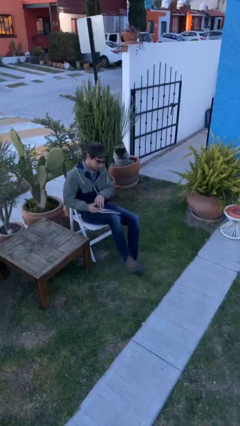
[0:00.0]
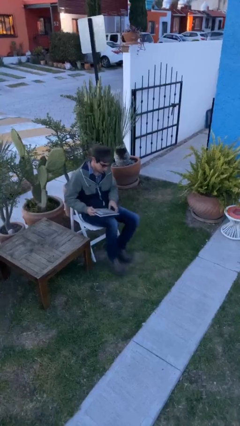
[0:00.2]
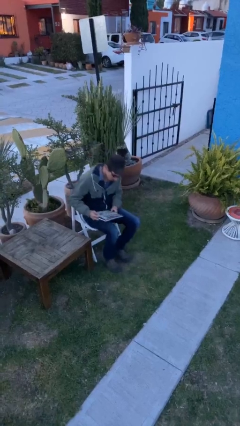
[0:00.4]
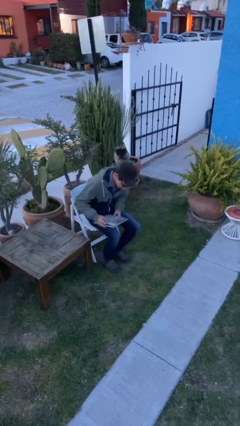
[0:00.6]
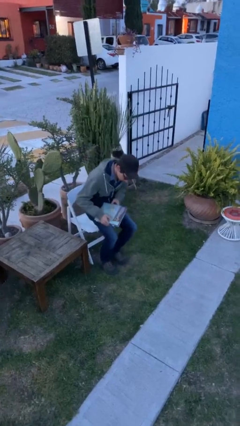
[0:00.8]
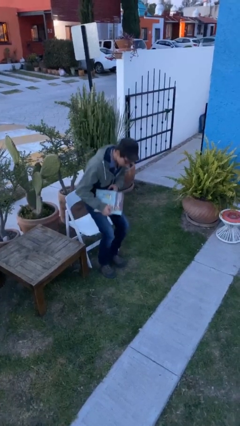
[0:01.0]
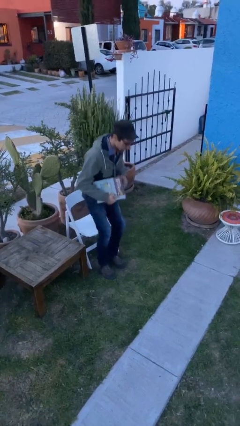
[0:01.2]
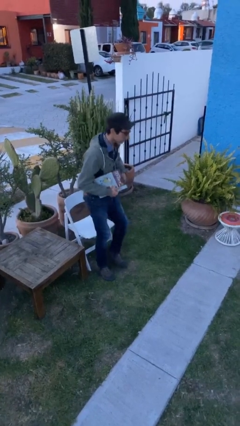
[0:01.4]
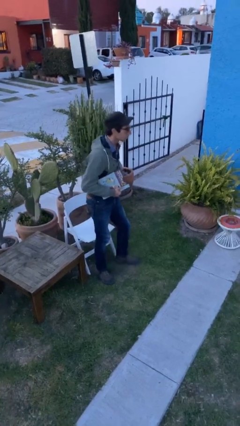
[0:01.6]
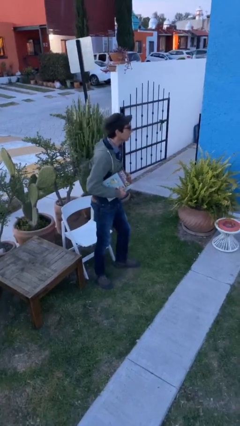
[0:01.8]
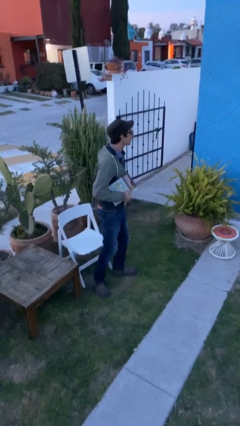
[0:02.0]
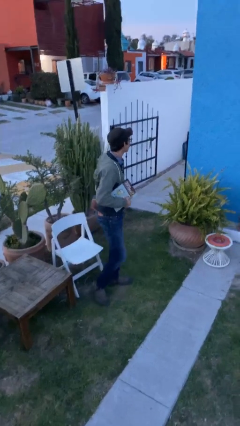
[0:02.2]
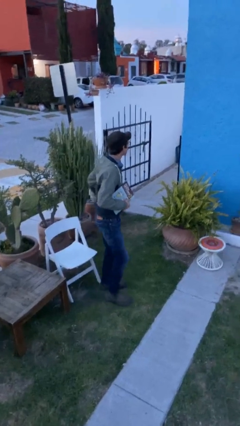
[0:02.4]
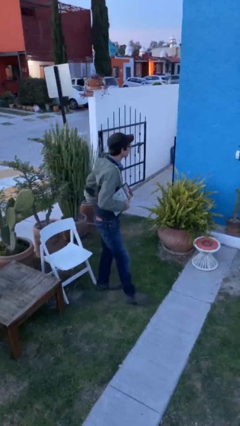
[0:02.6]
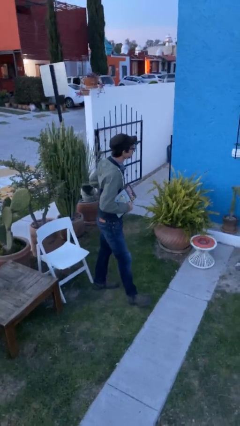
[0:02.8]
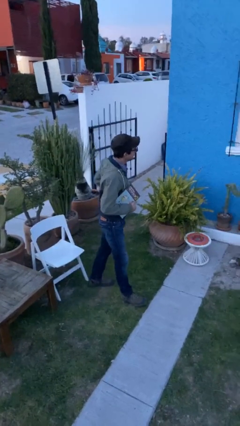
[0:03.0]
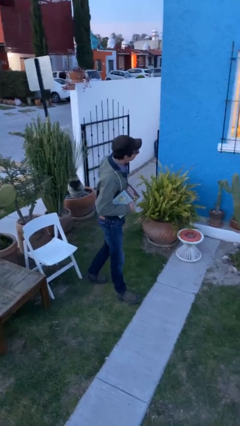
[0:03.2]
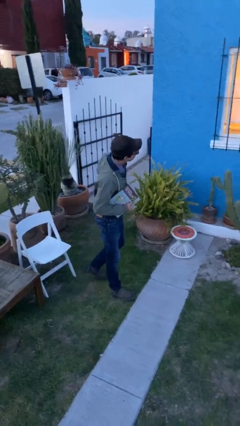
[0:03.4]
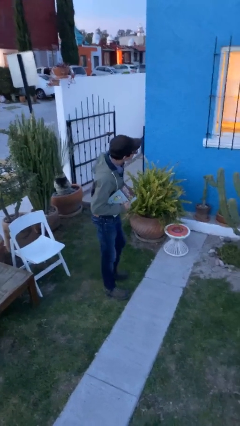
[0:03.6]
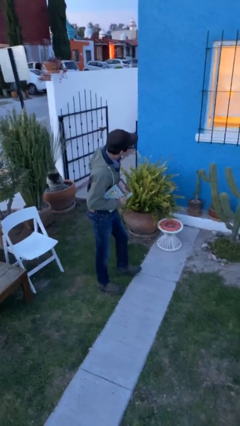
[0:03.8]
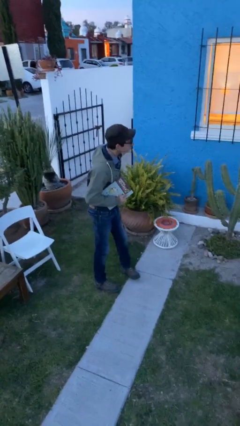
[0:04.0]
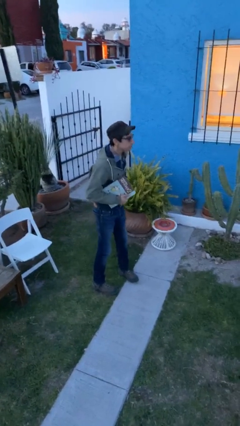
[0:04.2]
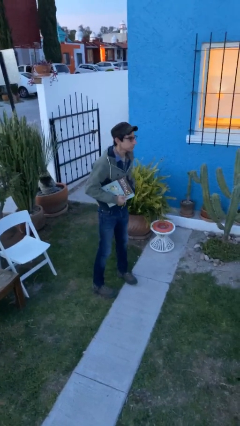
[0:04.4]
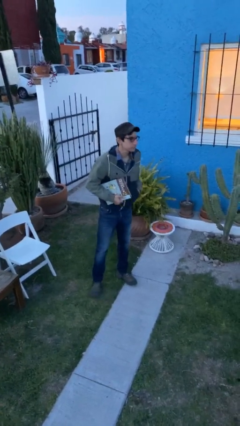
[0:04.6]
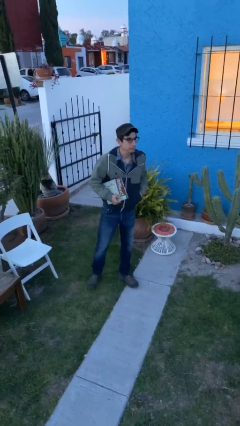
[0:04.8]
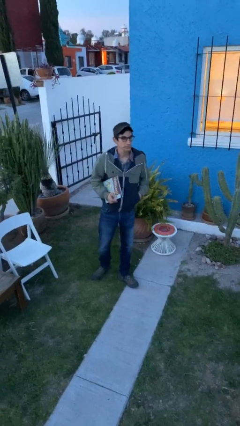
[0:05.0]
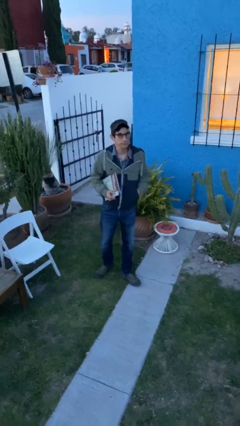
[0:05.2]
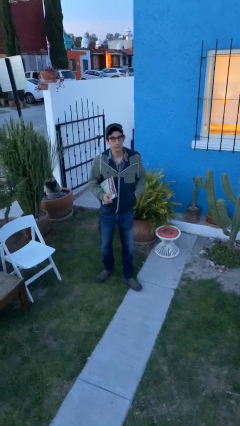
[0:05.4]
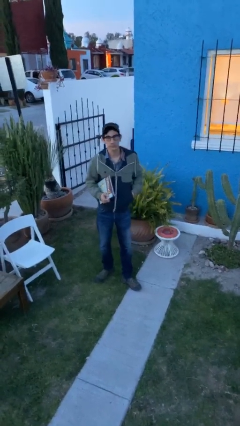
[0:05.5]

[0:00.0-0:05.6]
person stands up

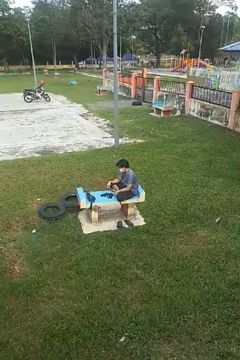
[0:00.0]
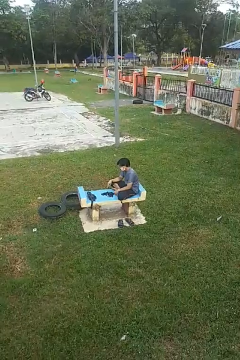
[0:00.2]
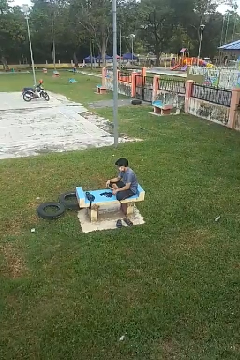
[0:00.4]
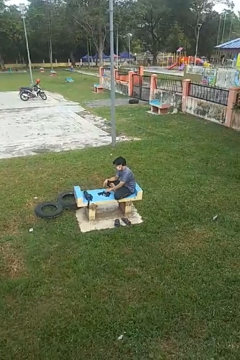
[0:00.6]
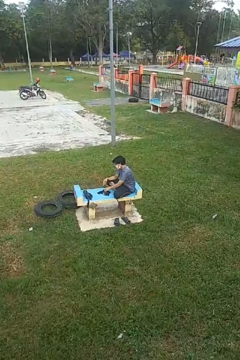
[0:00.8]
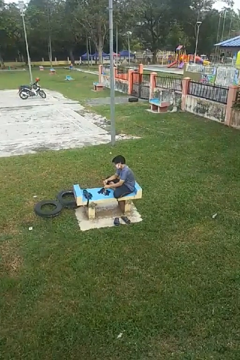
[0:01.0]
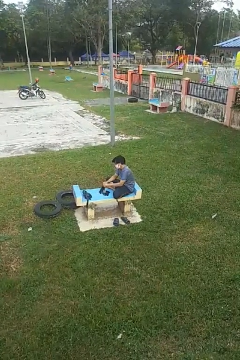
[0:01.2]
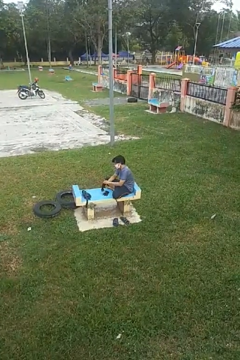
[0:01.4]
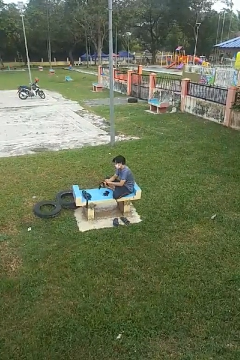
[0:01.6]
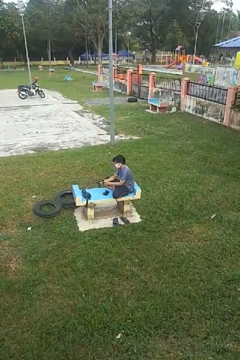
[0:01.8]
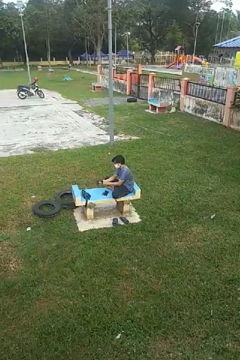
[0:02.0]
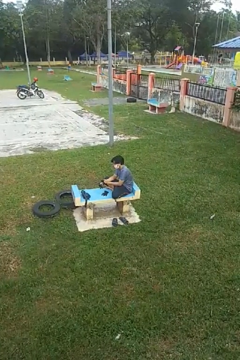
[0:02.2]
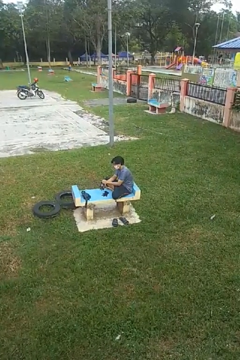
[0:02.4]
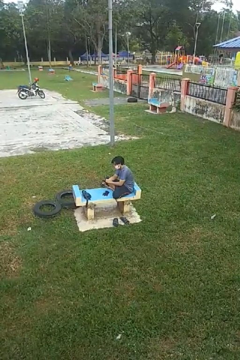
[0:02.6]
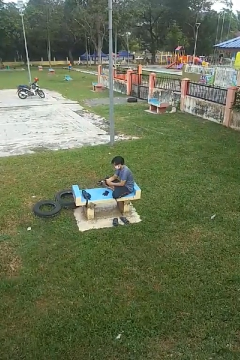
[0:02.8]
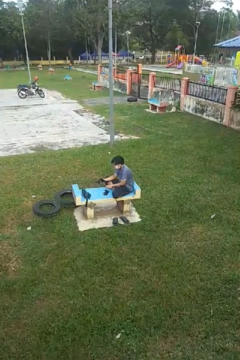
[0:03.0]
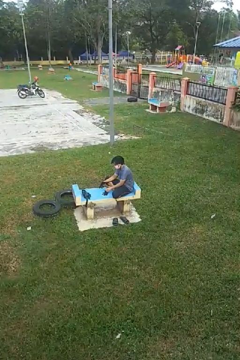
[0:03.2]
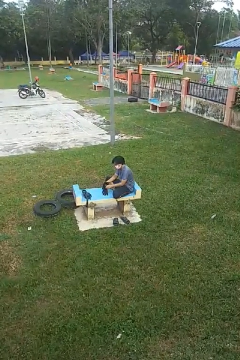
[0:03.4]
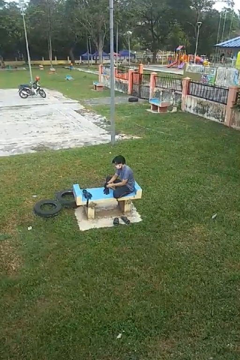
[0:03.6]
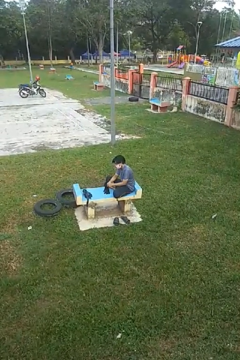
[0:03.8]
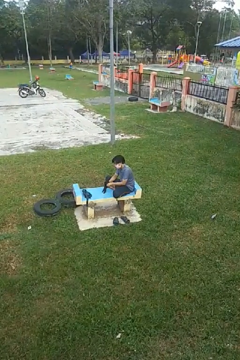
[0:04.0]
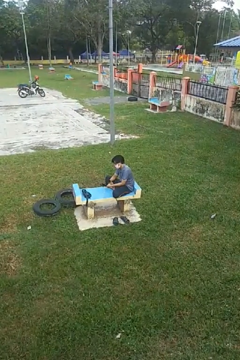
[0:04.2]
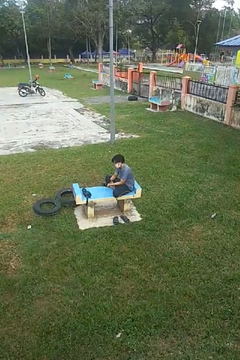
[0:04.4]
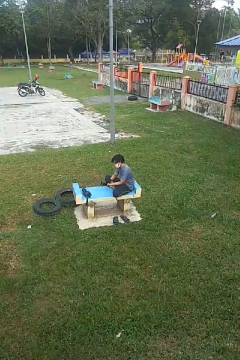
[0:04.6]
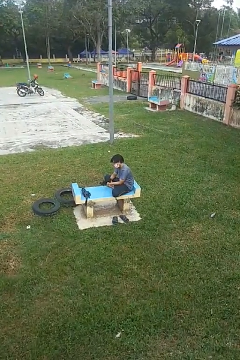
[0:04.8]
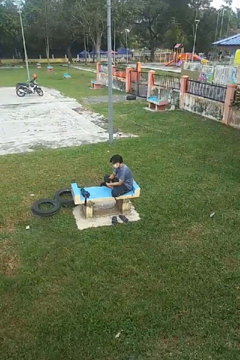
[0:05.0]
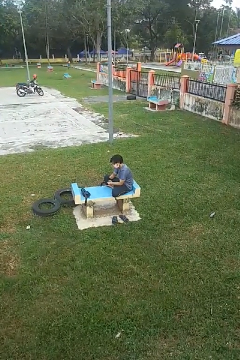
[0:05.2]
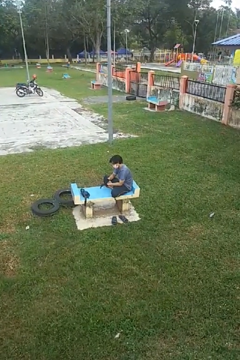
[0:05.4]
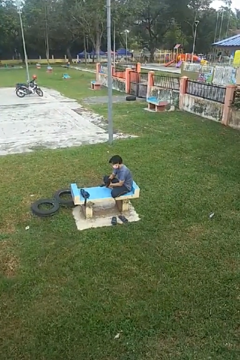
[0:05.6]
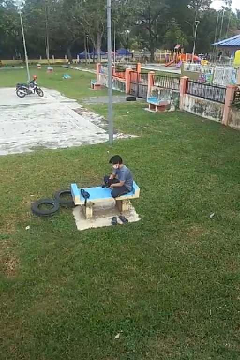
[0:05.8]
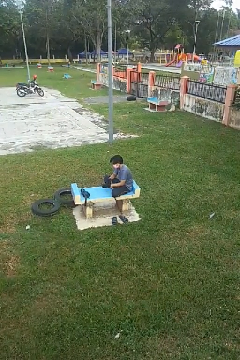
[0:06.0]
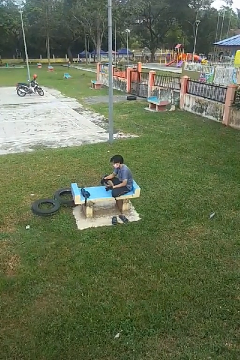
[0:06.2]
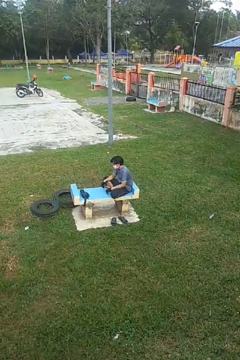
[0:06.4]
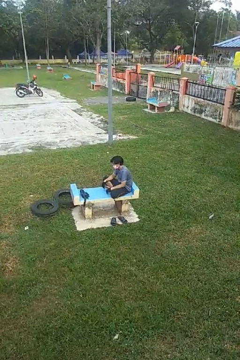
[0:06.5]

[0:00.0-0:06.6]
person puts on gloves

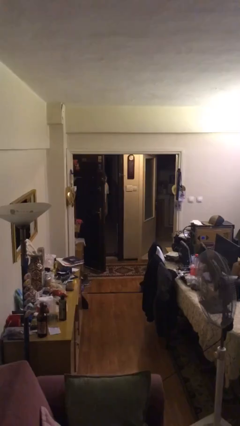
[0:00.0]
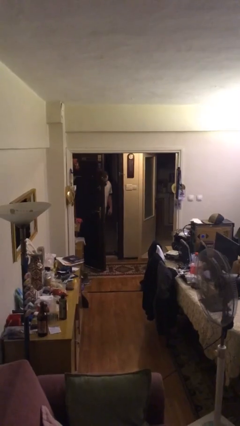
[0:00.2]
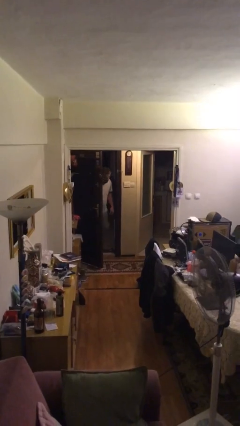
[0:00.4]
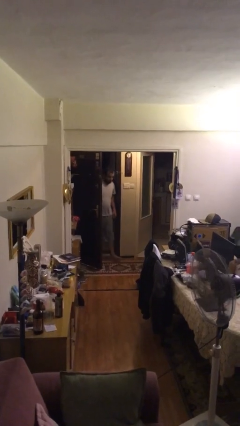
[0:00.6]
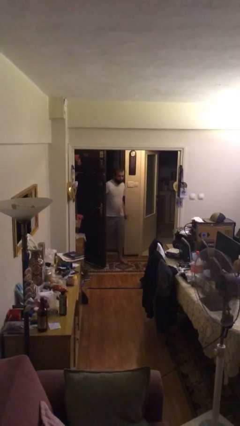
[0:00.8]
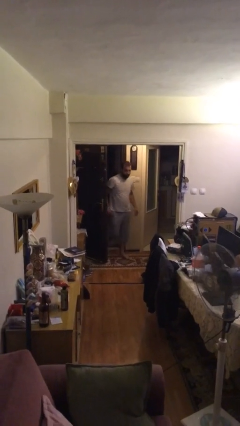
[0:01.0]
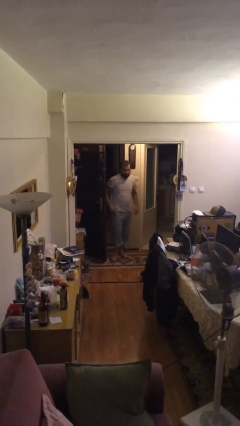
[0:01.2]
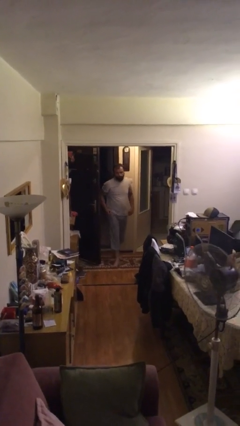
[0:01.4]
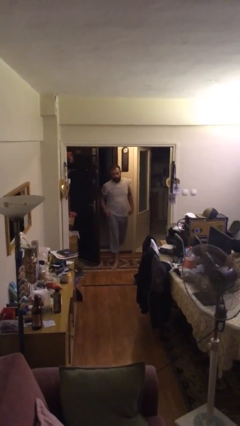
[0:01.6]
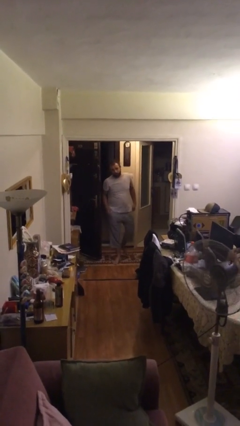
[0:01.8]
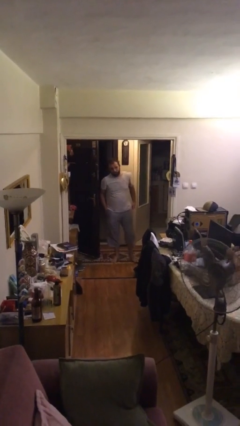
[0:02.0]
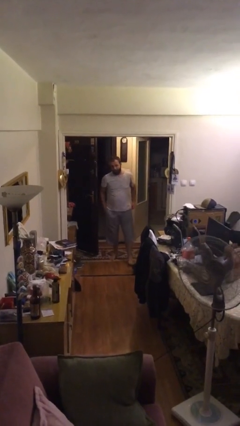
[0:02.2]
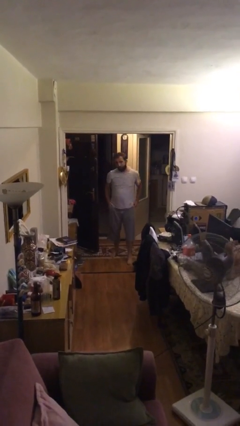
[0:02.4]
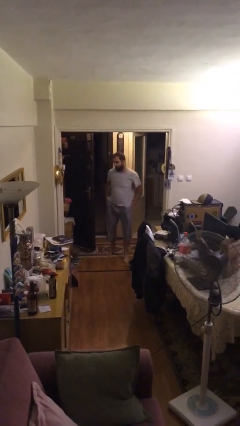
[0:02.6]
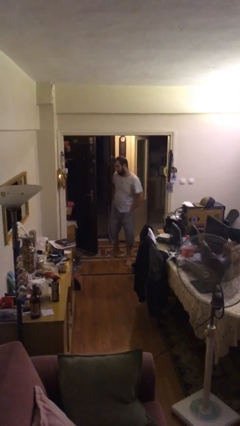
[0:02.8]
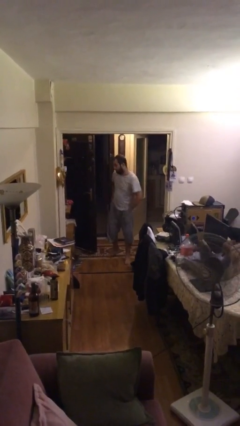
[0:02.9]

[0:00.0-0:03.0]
person enters scene through structure

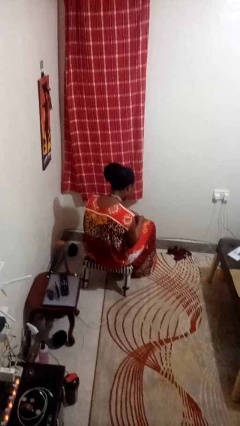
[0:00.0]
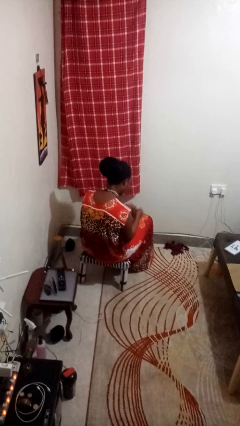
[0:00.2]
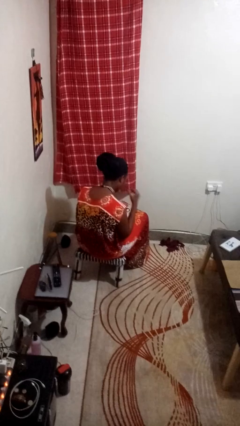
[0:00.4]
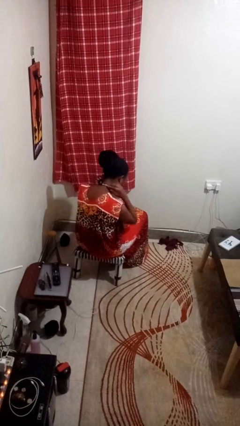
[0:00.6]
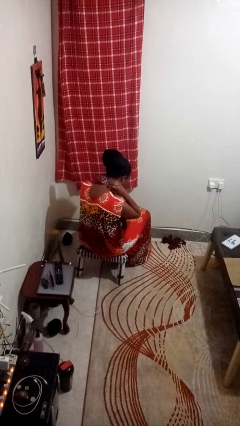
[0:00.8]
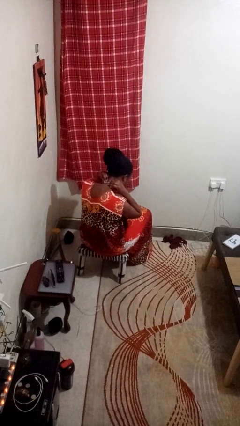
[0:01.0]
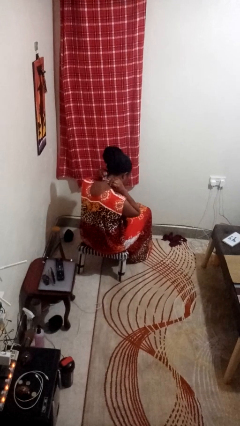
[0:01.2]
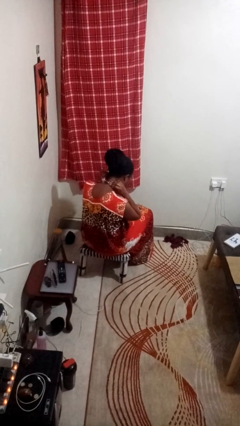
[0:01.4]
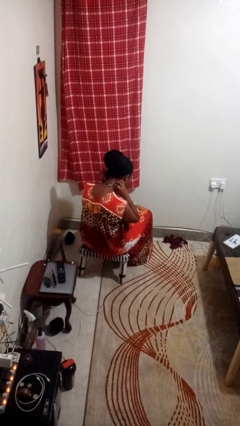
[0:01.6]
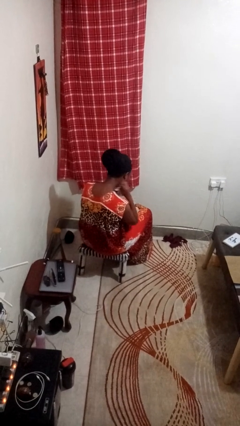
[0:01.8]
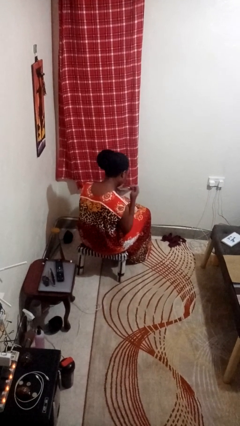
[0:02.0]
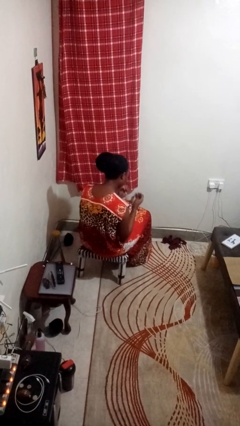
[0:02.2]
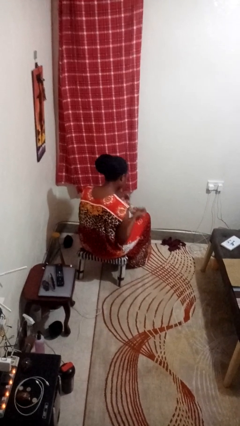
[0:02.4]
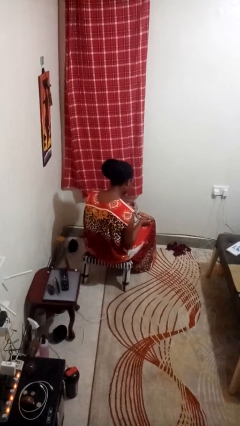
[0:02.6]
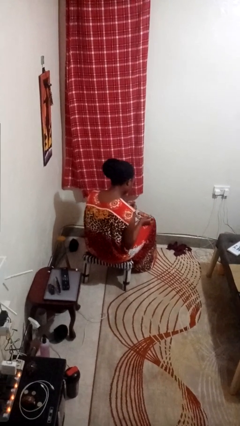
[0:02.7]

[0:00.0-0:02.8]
person takes off necklace

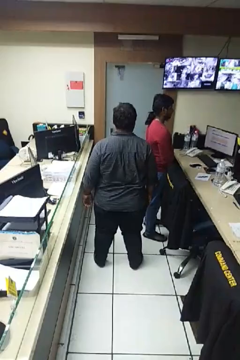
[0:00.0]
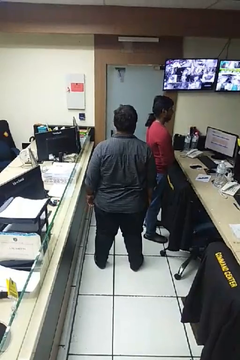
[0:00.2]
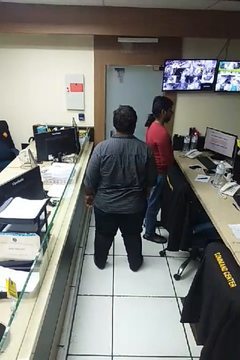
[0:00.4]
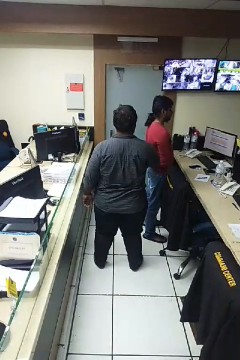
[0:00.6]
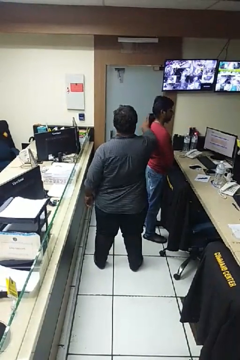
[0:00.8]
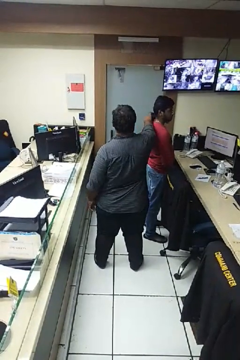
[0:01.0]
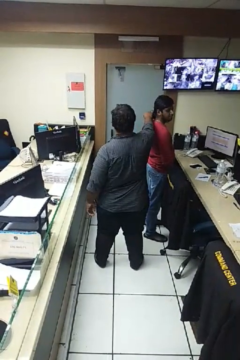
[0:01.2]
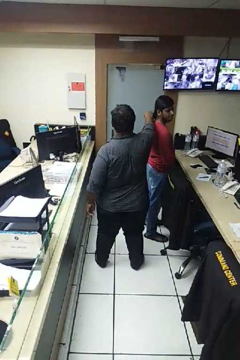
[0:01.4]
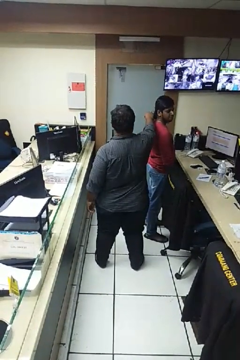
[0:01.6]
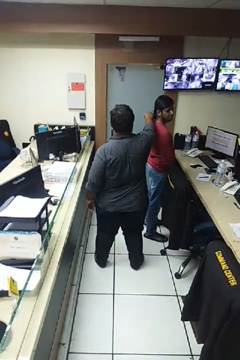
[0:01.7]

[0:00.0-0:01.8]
person grabs person by hair
